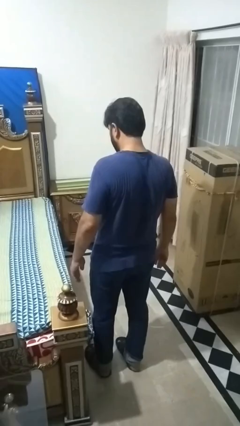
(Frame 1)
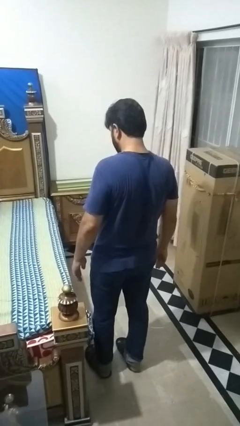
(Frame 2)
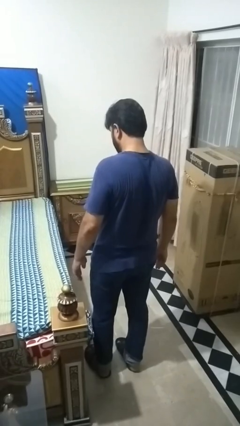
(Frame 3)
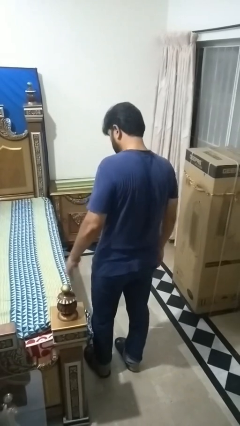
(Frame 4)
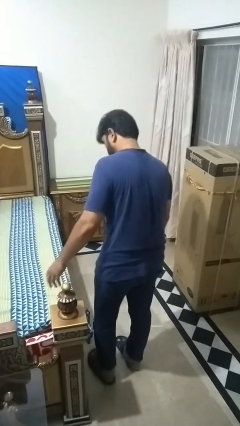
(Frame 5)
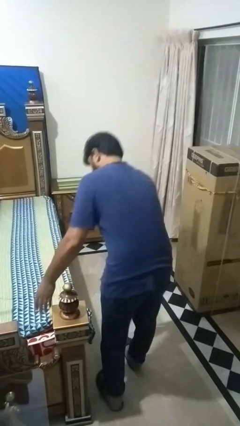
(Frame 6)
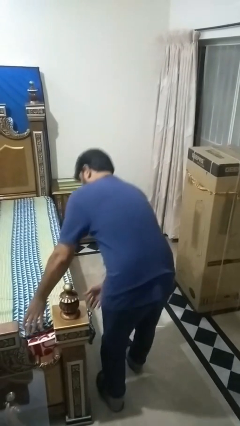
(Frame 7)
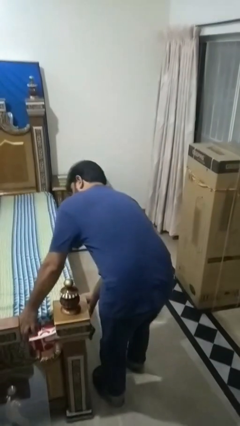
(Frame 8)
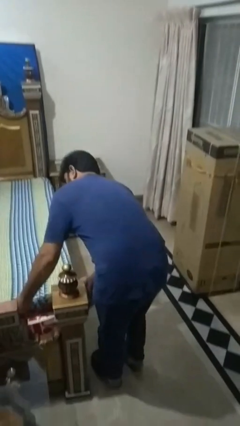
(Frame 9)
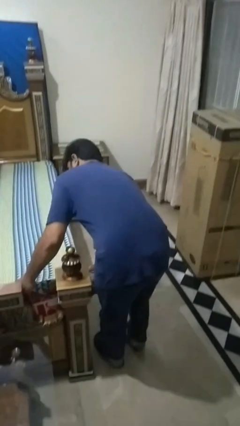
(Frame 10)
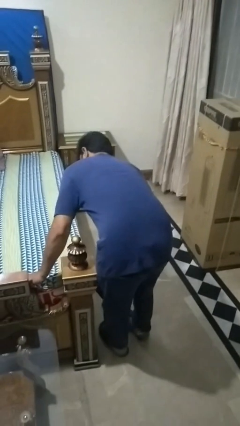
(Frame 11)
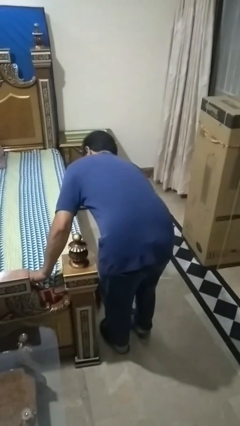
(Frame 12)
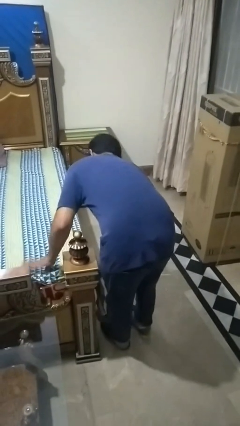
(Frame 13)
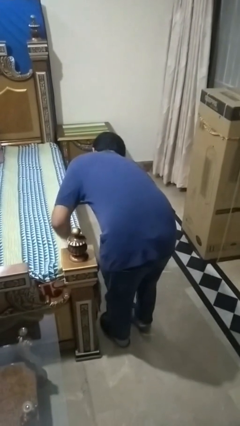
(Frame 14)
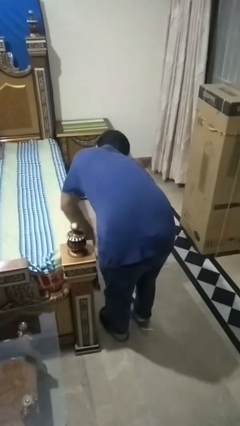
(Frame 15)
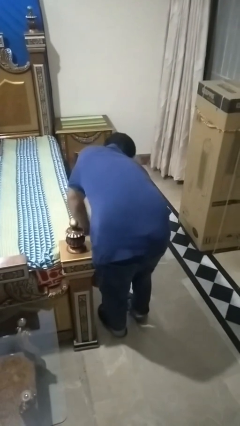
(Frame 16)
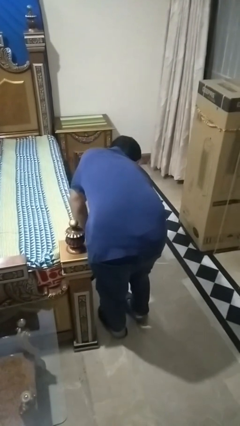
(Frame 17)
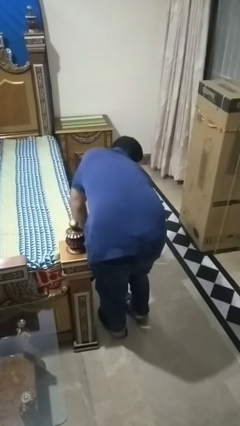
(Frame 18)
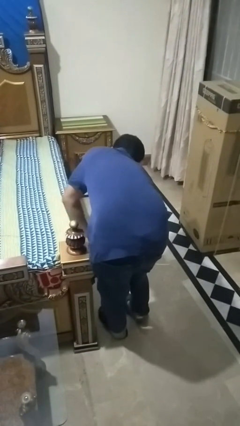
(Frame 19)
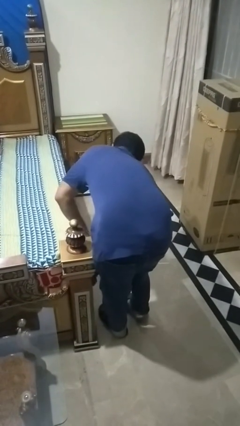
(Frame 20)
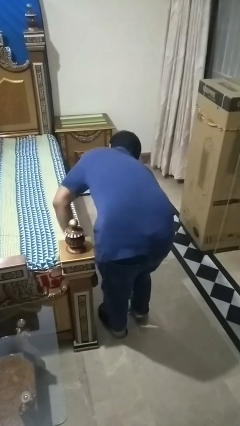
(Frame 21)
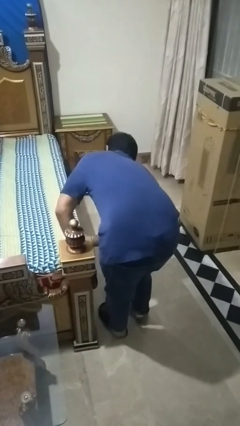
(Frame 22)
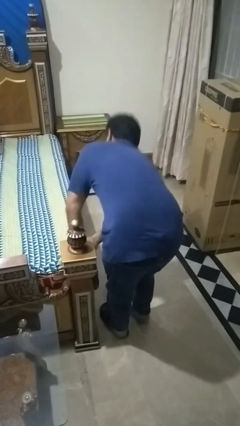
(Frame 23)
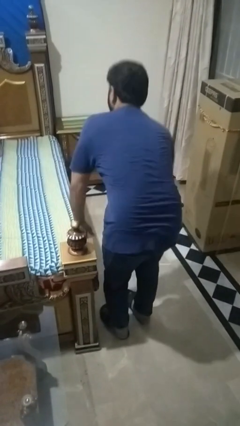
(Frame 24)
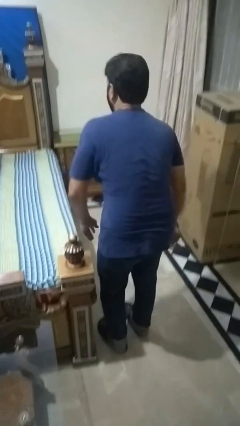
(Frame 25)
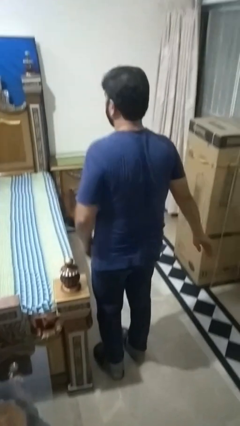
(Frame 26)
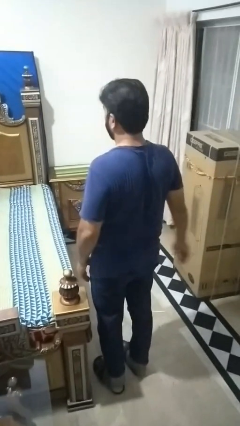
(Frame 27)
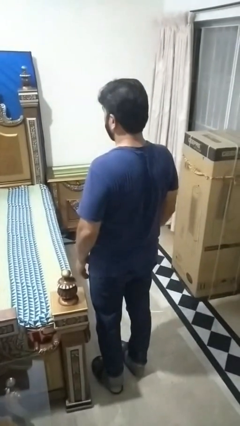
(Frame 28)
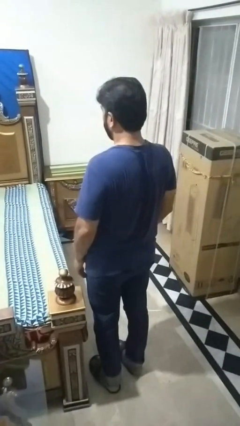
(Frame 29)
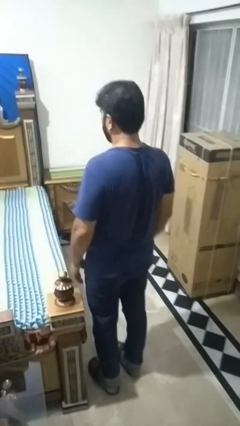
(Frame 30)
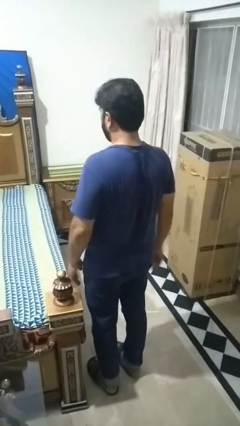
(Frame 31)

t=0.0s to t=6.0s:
person makes bed

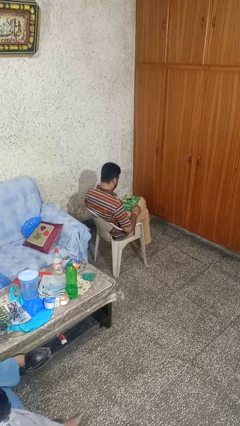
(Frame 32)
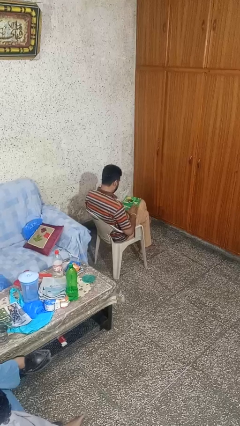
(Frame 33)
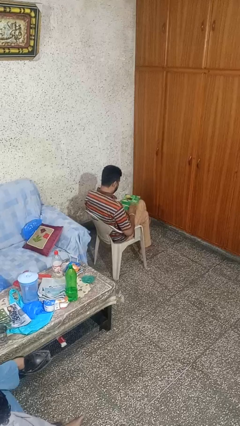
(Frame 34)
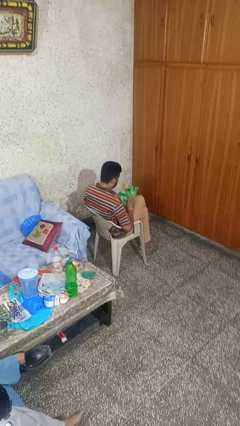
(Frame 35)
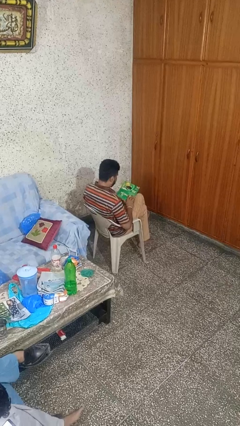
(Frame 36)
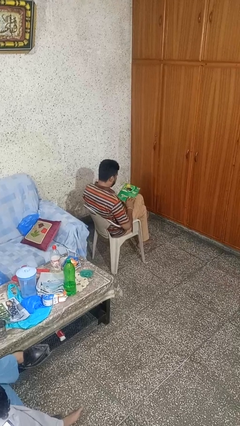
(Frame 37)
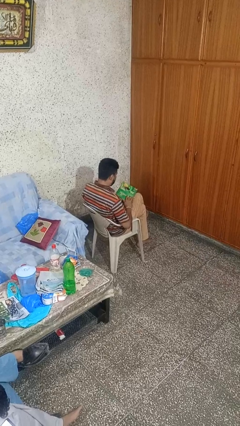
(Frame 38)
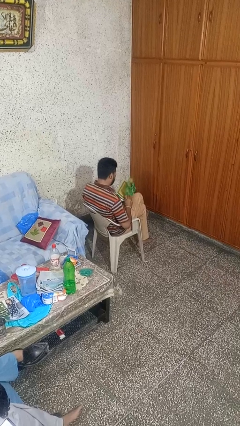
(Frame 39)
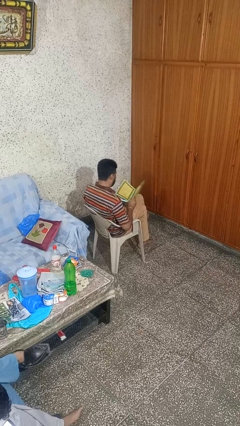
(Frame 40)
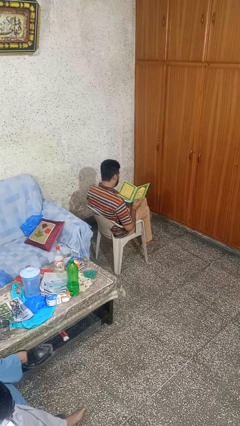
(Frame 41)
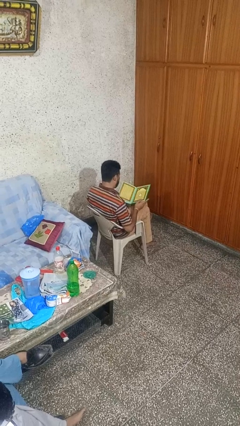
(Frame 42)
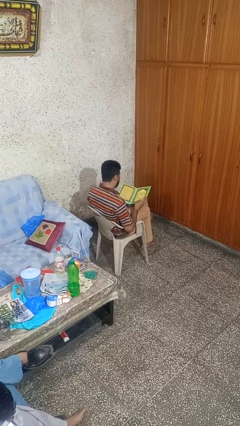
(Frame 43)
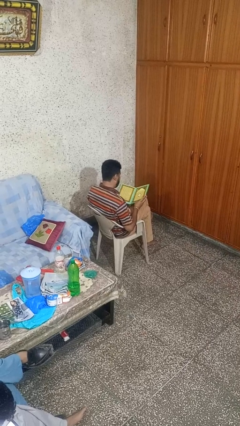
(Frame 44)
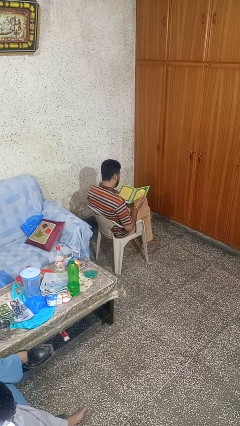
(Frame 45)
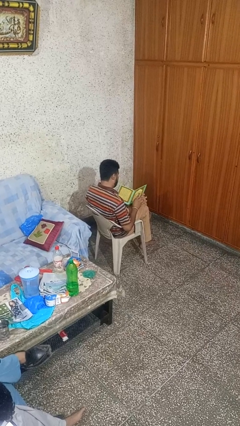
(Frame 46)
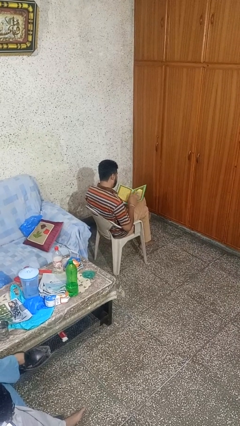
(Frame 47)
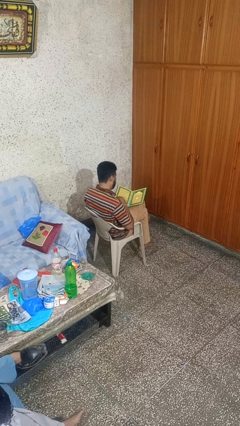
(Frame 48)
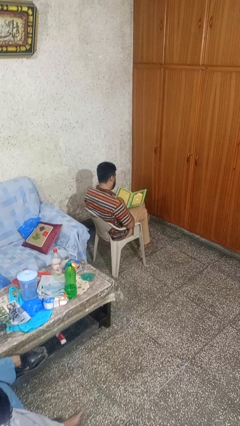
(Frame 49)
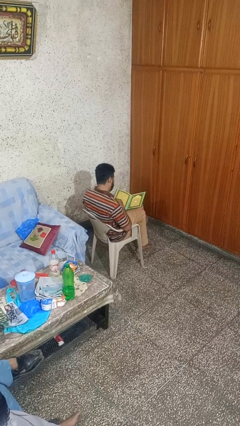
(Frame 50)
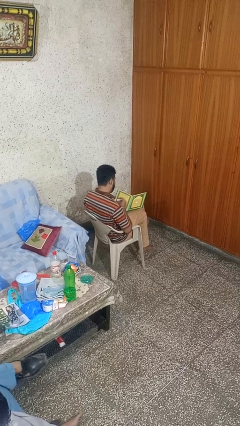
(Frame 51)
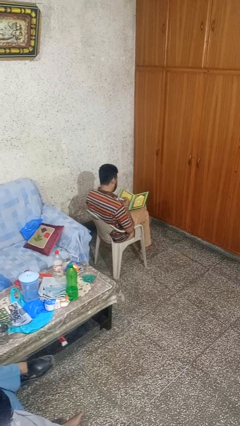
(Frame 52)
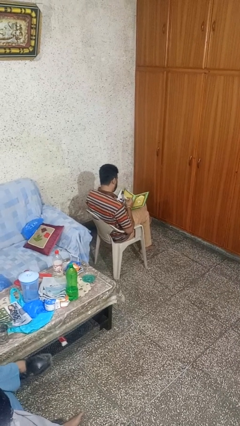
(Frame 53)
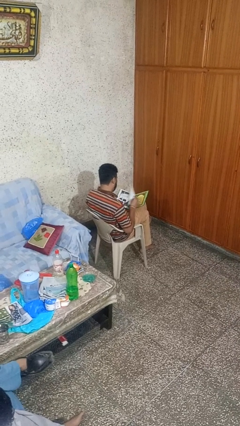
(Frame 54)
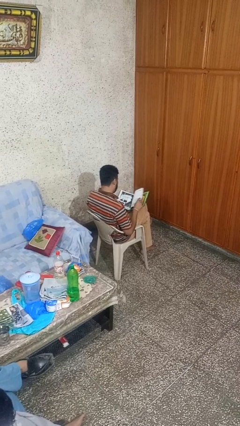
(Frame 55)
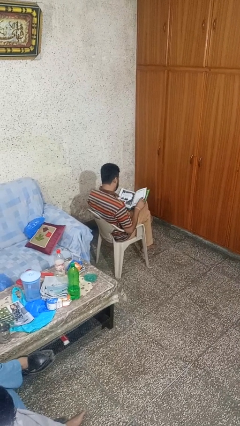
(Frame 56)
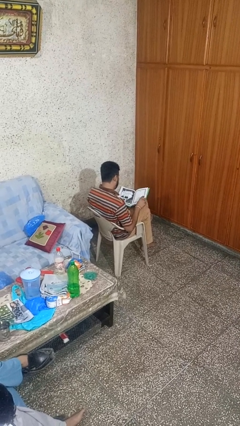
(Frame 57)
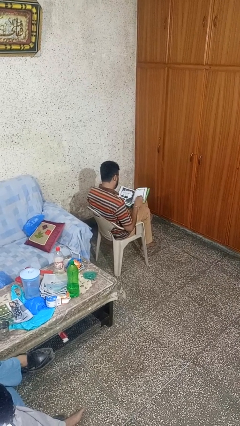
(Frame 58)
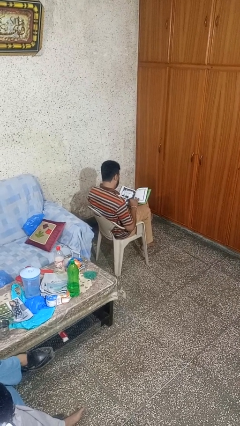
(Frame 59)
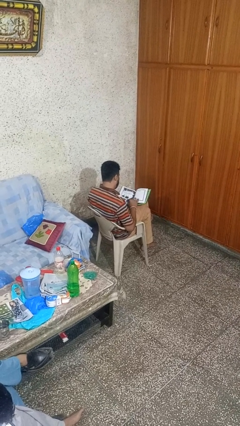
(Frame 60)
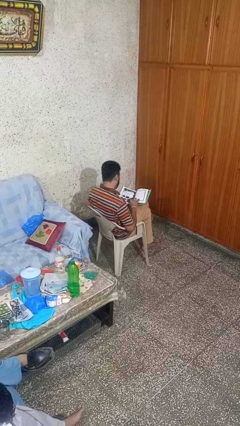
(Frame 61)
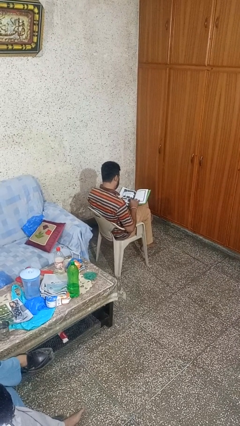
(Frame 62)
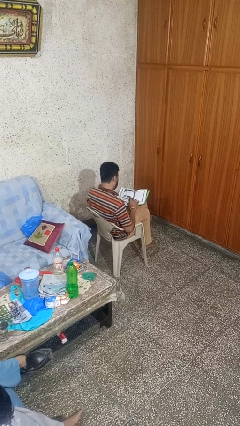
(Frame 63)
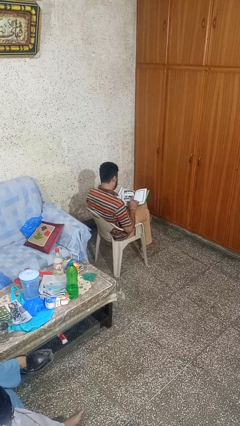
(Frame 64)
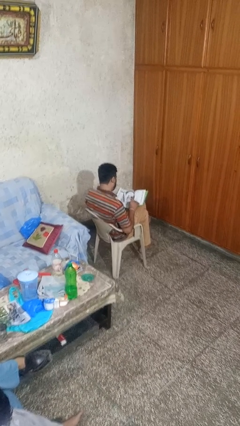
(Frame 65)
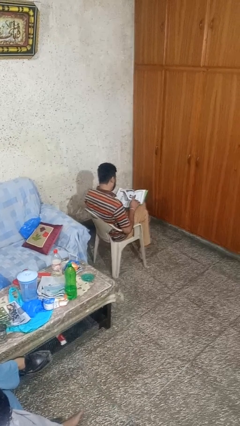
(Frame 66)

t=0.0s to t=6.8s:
person reads book

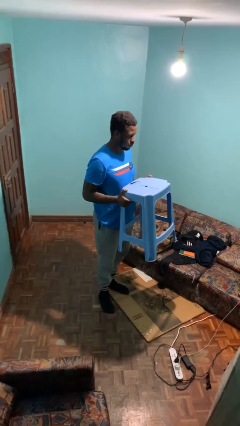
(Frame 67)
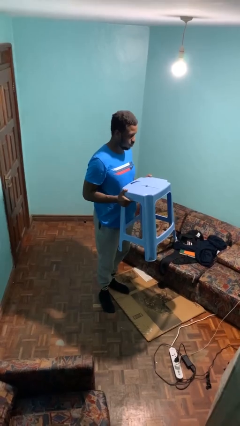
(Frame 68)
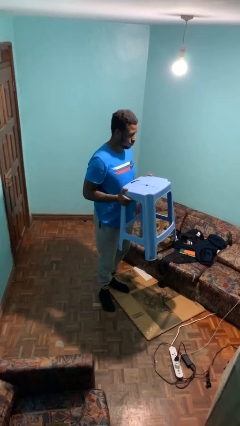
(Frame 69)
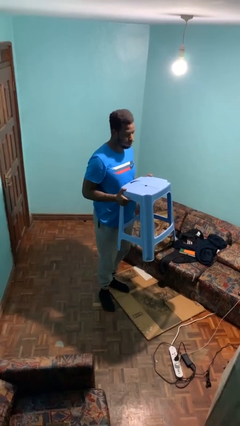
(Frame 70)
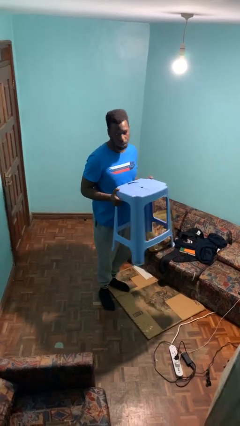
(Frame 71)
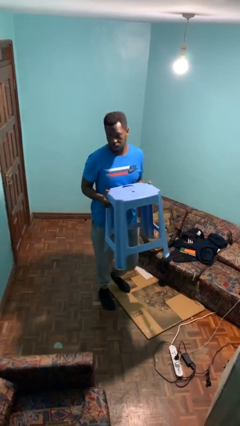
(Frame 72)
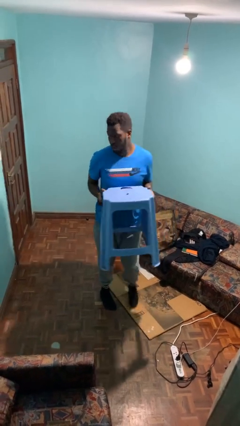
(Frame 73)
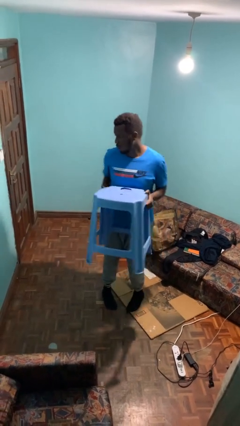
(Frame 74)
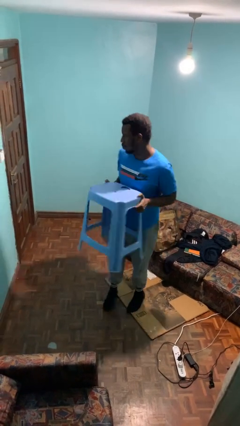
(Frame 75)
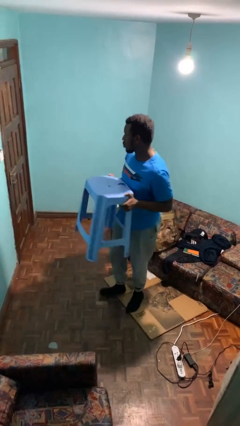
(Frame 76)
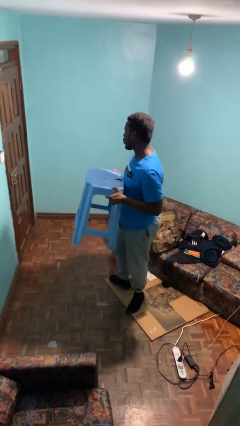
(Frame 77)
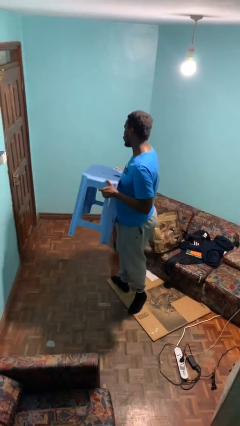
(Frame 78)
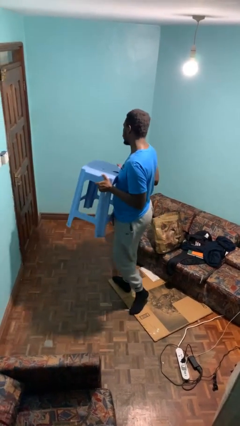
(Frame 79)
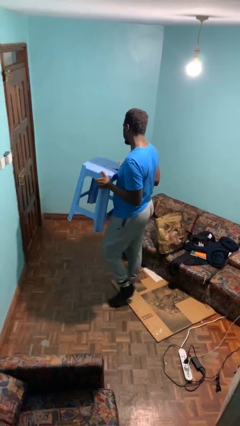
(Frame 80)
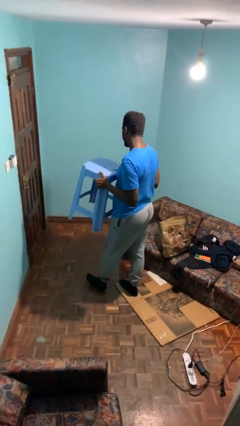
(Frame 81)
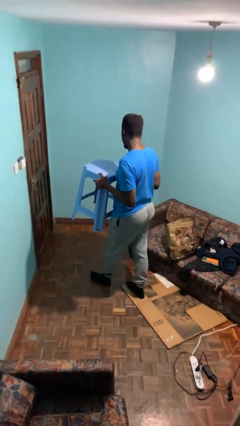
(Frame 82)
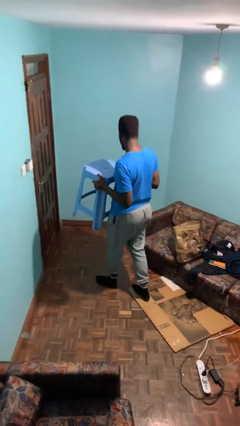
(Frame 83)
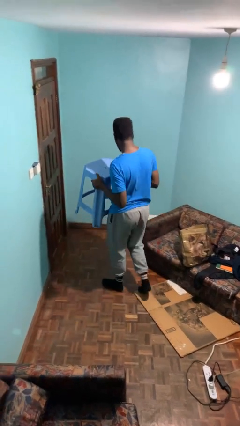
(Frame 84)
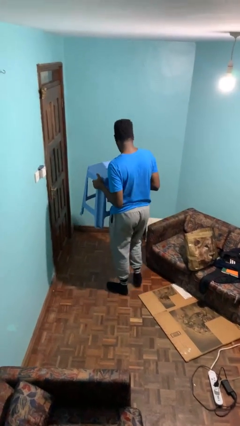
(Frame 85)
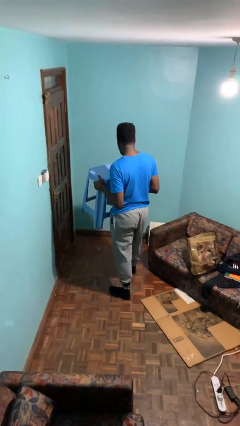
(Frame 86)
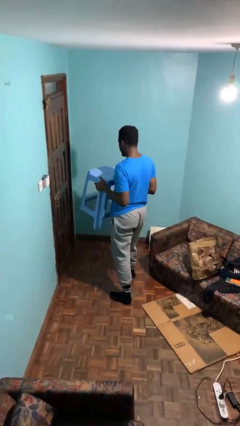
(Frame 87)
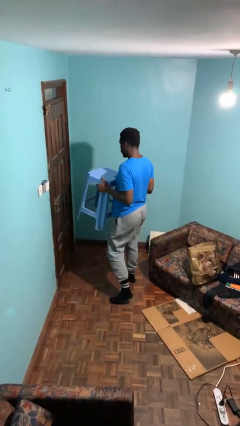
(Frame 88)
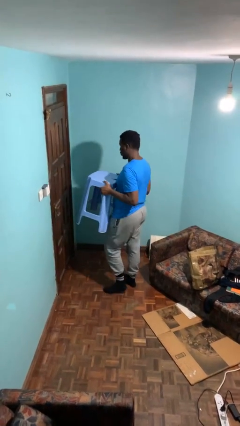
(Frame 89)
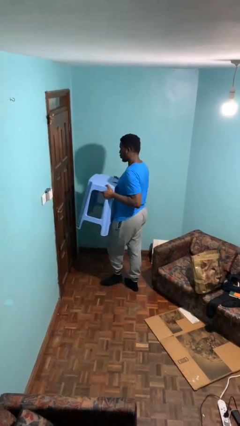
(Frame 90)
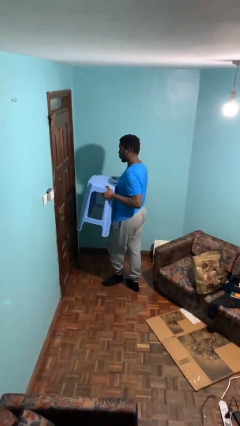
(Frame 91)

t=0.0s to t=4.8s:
person carries furniture
